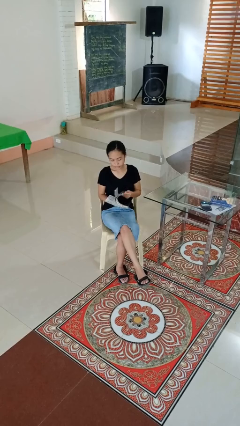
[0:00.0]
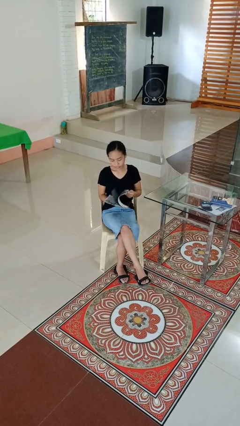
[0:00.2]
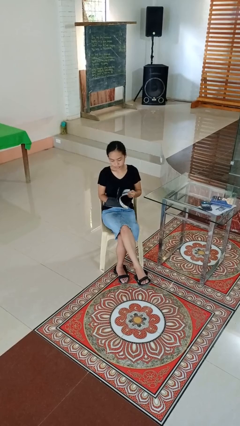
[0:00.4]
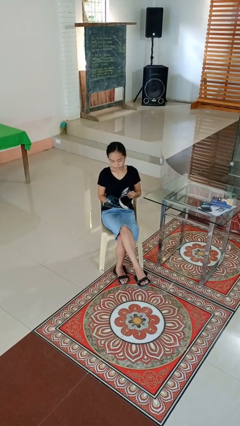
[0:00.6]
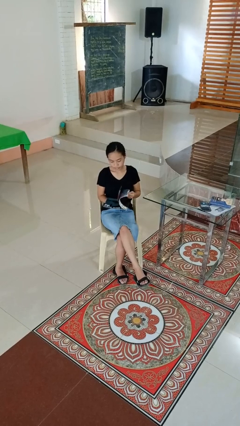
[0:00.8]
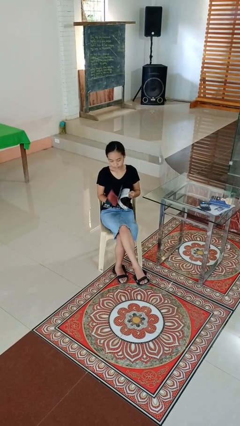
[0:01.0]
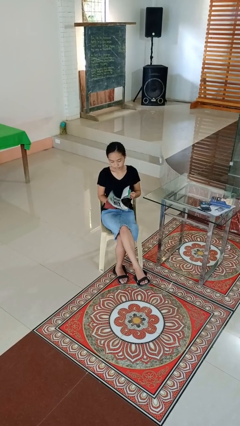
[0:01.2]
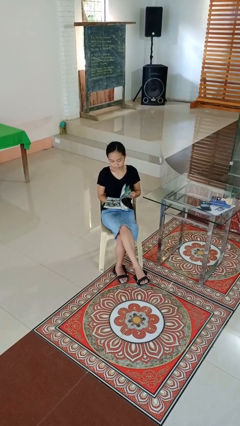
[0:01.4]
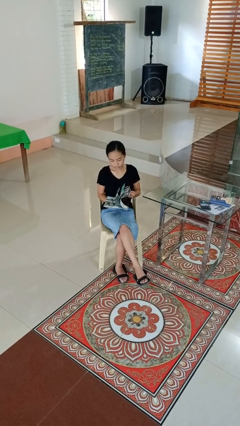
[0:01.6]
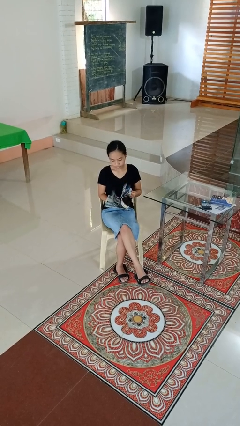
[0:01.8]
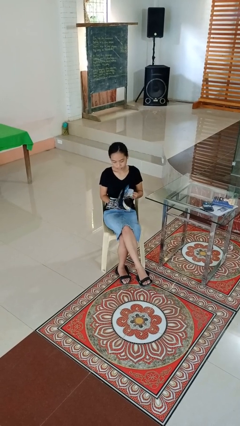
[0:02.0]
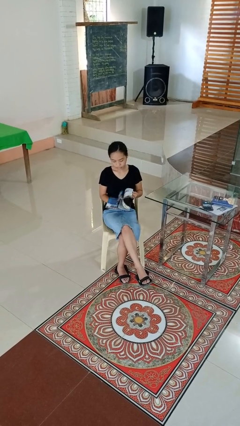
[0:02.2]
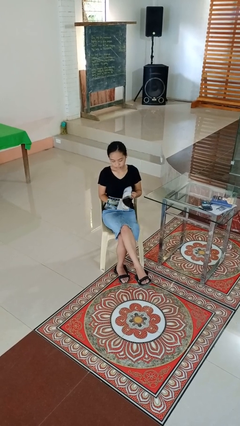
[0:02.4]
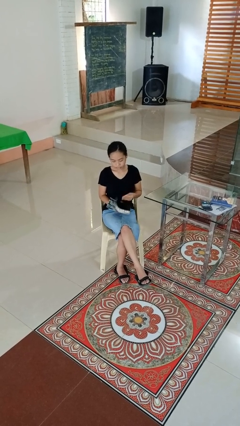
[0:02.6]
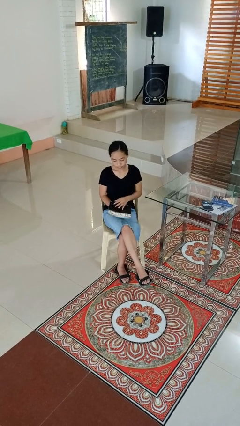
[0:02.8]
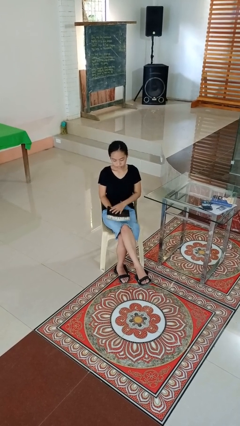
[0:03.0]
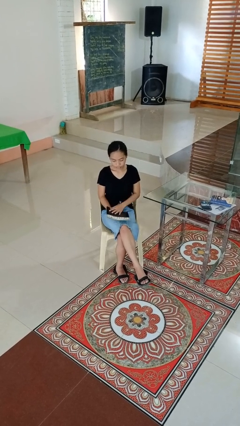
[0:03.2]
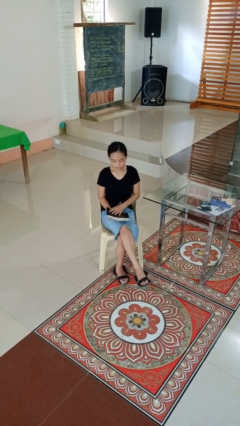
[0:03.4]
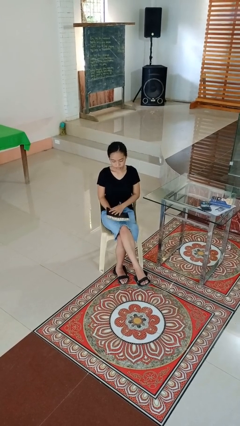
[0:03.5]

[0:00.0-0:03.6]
person reads magazine

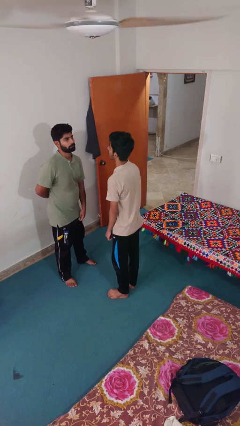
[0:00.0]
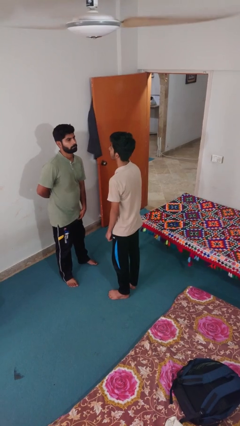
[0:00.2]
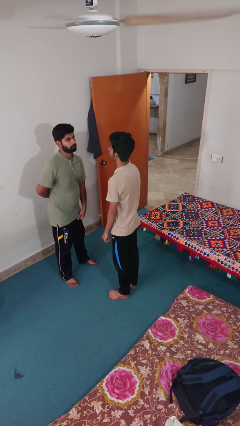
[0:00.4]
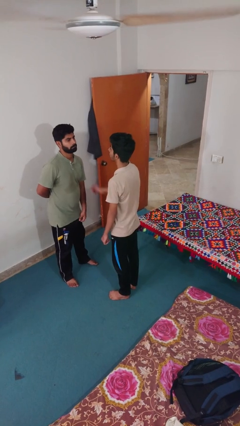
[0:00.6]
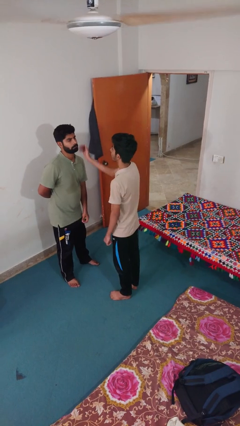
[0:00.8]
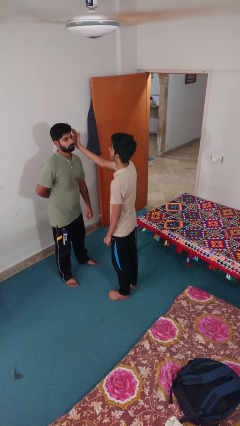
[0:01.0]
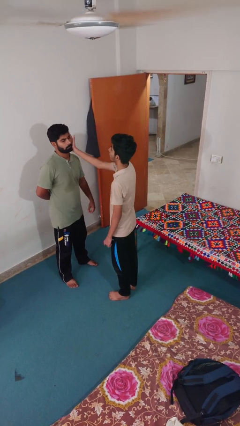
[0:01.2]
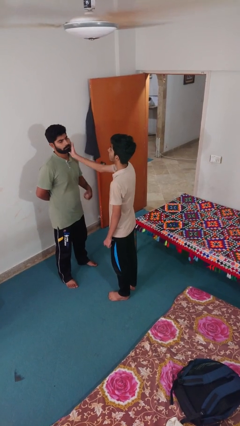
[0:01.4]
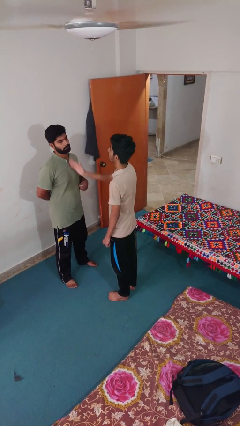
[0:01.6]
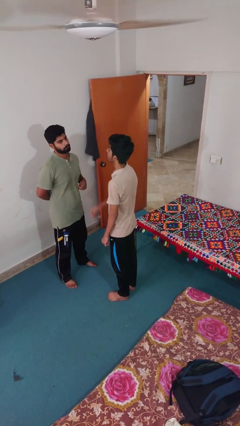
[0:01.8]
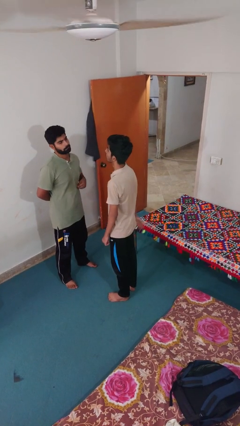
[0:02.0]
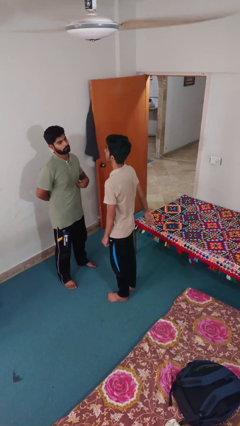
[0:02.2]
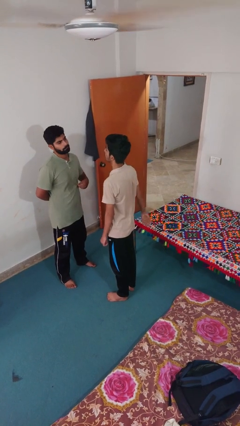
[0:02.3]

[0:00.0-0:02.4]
person touches face of person

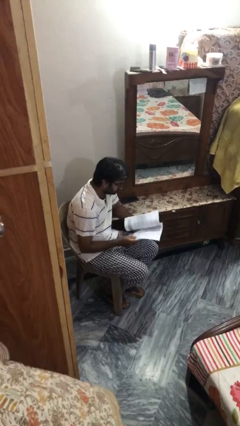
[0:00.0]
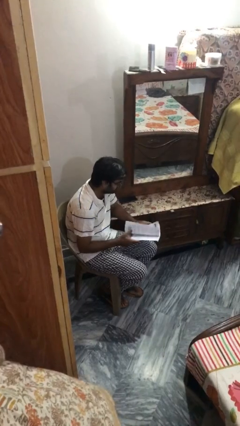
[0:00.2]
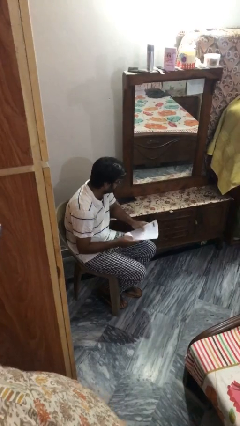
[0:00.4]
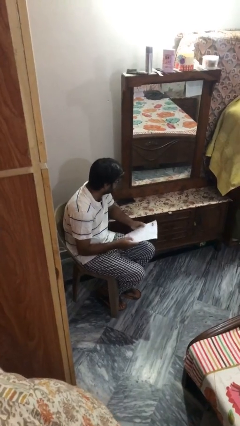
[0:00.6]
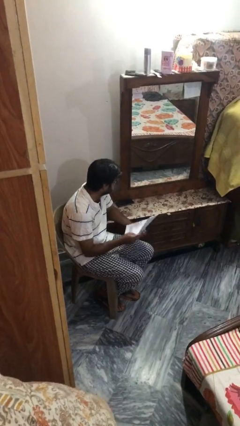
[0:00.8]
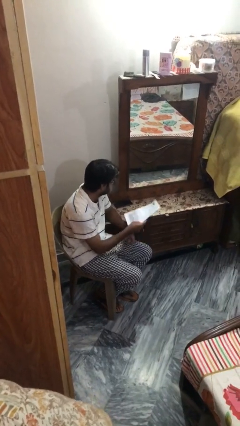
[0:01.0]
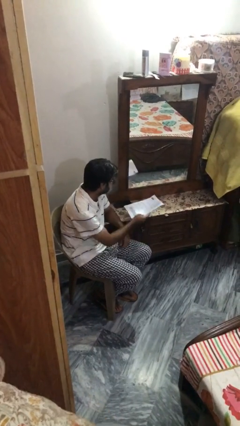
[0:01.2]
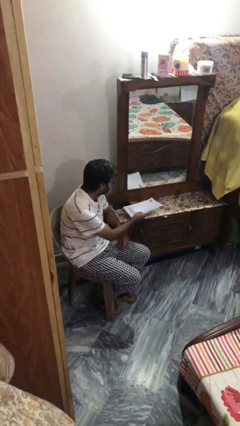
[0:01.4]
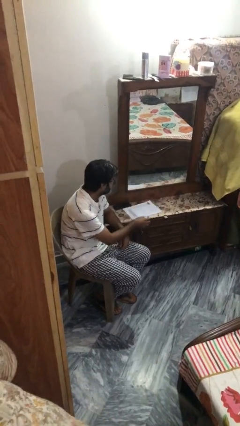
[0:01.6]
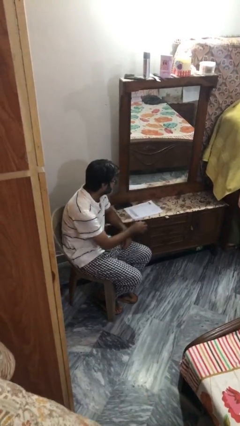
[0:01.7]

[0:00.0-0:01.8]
person puts down object on table

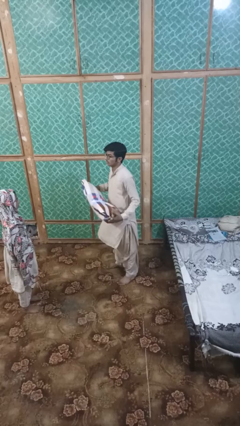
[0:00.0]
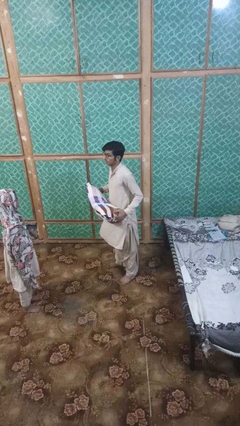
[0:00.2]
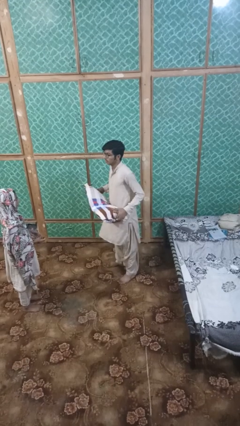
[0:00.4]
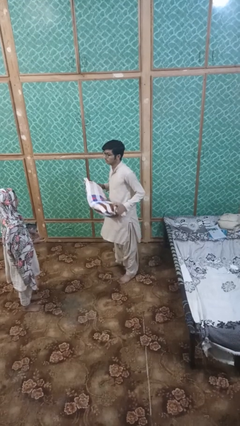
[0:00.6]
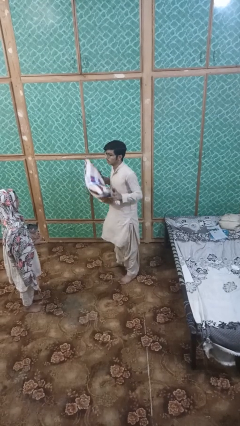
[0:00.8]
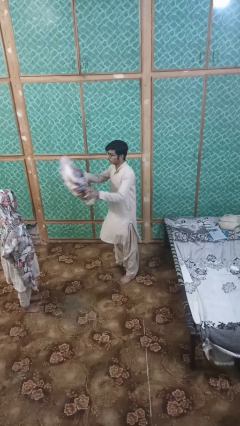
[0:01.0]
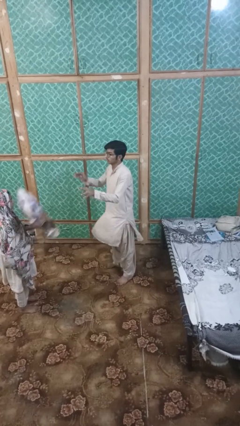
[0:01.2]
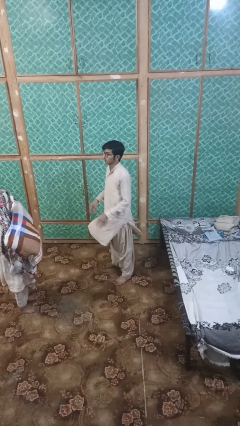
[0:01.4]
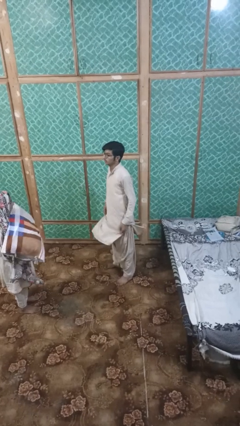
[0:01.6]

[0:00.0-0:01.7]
person throws object to person

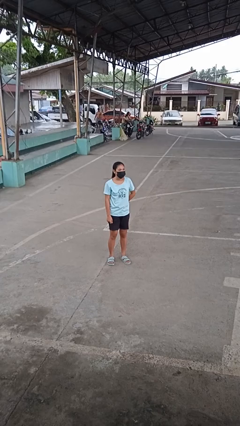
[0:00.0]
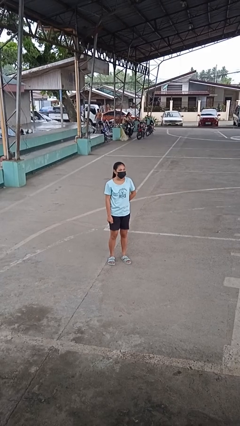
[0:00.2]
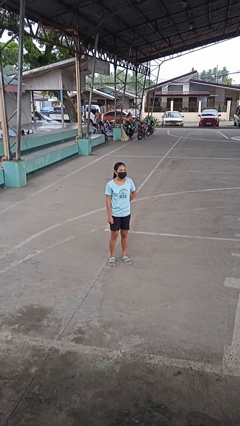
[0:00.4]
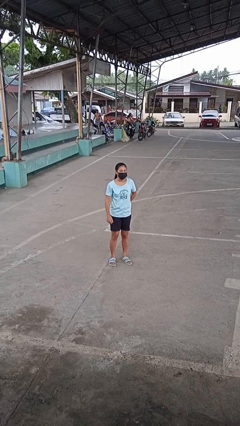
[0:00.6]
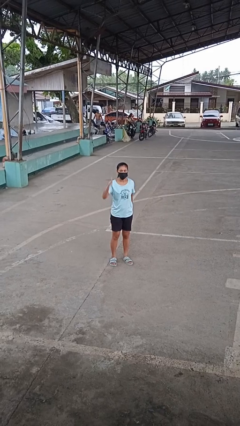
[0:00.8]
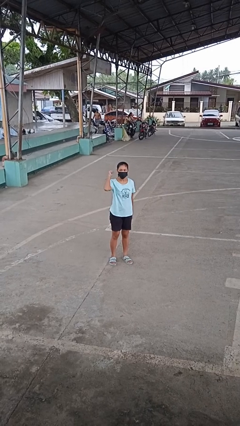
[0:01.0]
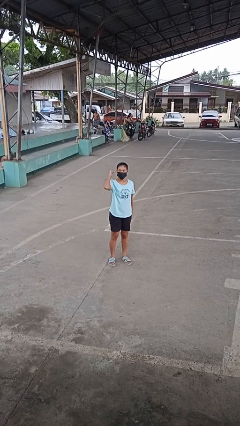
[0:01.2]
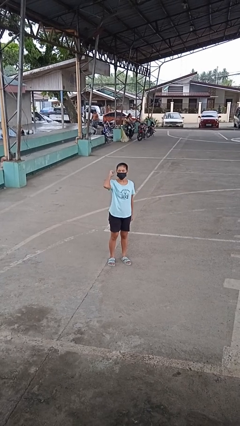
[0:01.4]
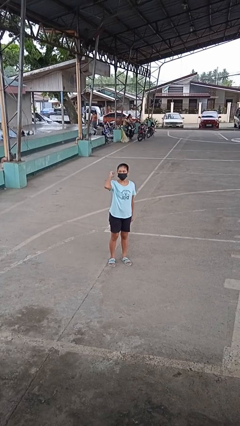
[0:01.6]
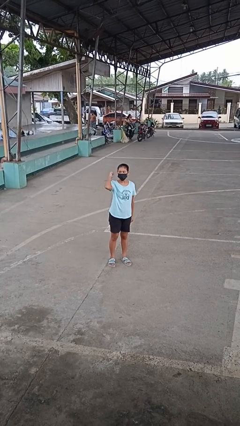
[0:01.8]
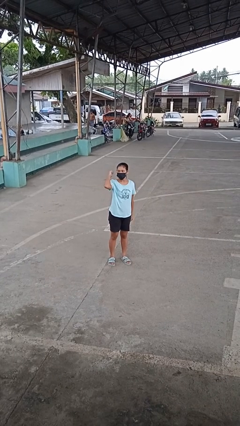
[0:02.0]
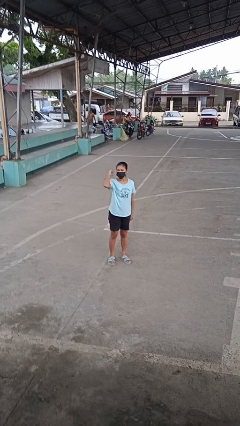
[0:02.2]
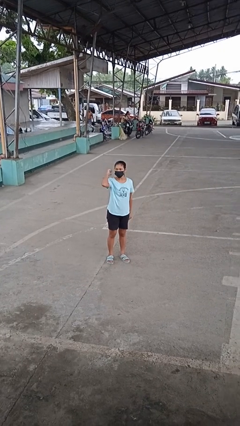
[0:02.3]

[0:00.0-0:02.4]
person gestures behind me

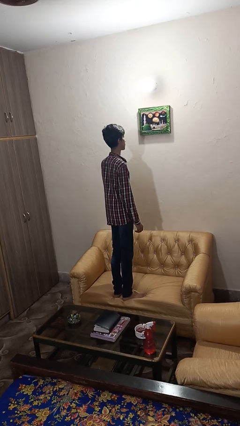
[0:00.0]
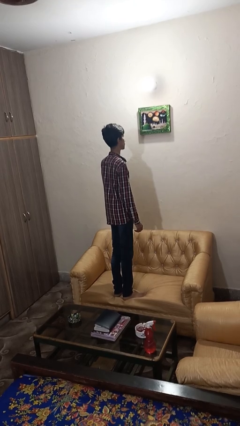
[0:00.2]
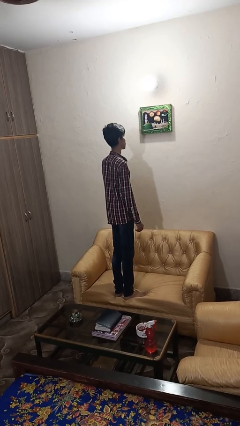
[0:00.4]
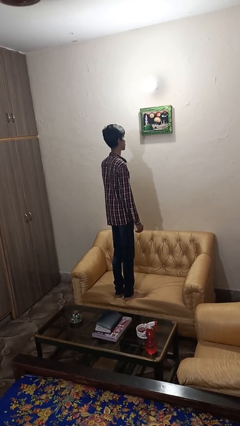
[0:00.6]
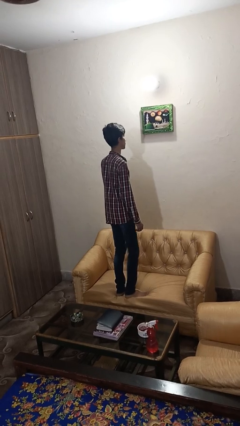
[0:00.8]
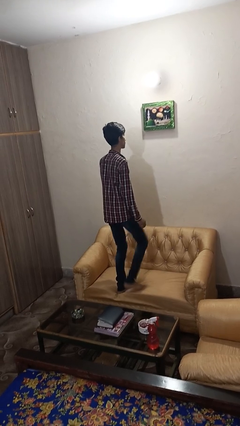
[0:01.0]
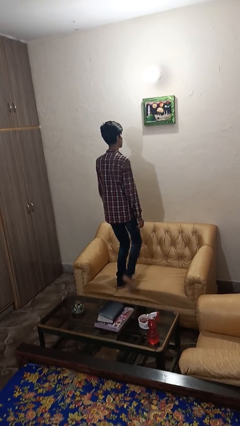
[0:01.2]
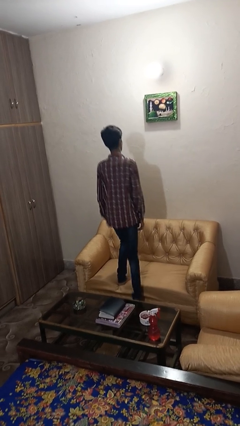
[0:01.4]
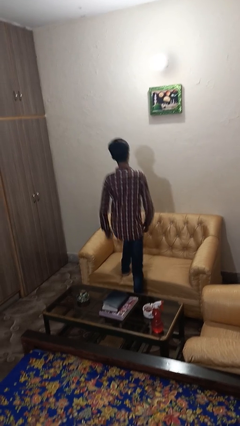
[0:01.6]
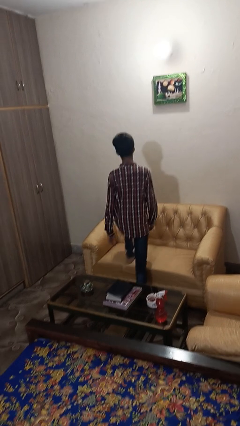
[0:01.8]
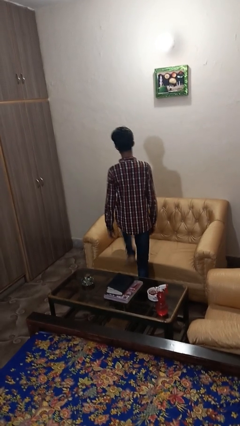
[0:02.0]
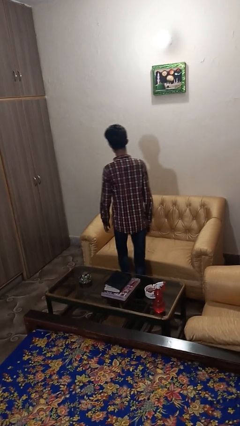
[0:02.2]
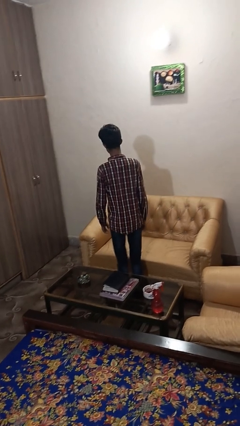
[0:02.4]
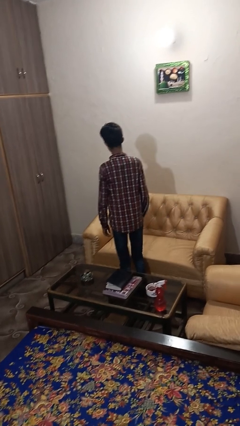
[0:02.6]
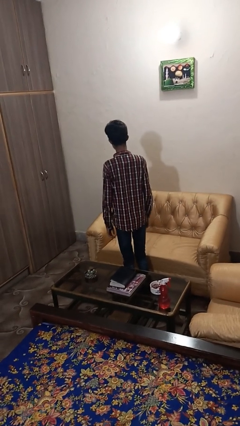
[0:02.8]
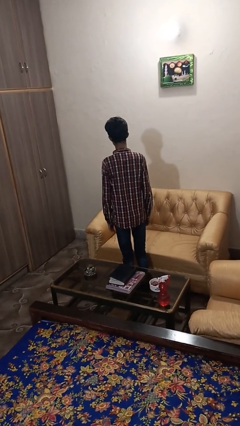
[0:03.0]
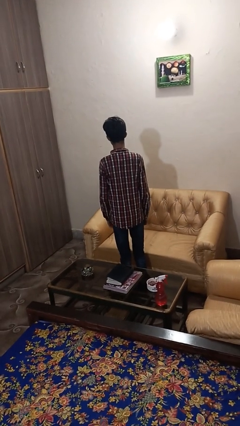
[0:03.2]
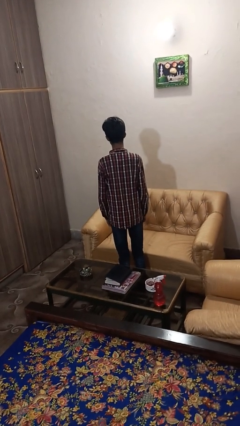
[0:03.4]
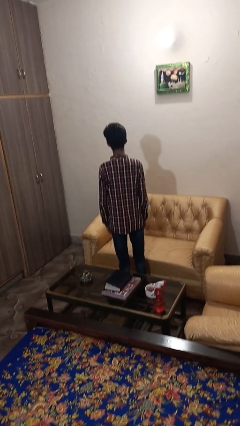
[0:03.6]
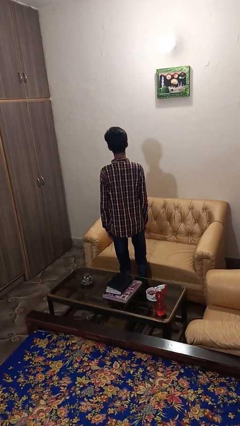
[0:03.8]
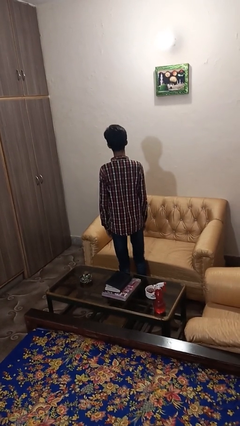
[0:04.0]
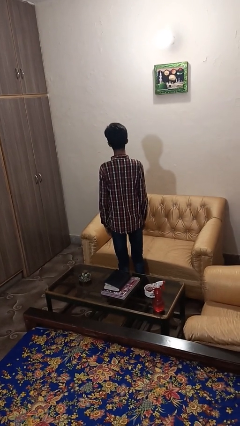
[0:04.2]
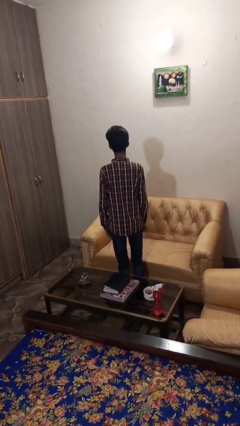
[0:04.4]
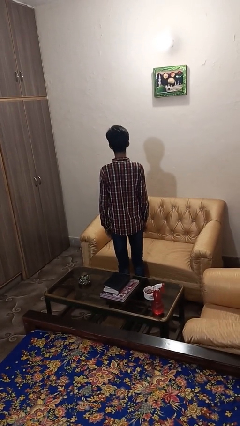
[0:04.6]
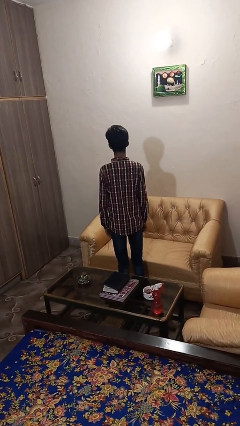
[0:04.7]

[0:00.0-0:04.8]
person climbs off couch

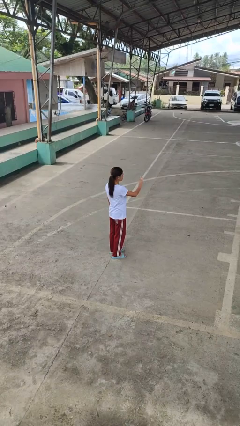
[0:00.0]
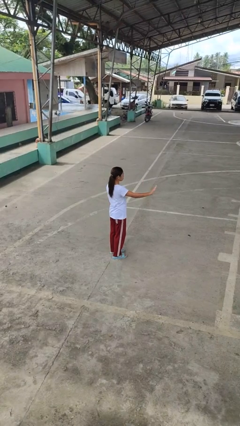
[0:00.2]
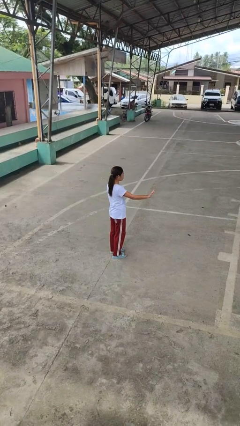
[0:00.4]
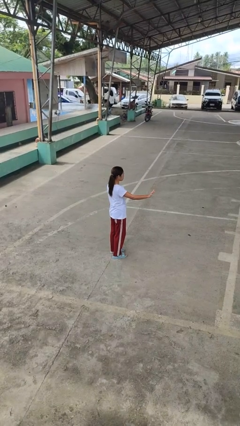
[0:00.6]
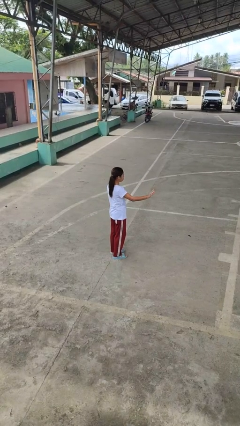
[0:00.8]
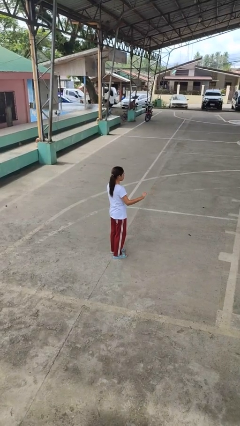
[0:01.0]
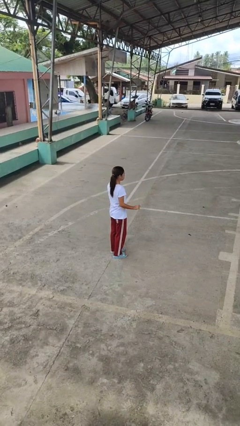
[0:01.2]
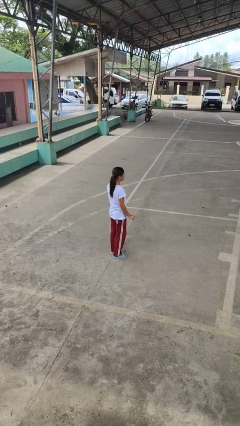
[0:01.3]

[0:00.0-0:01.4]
person gestures swipe right
